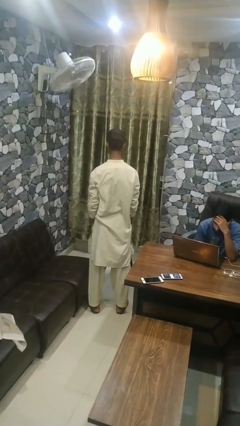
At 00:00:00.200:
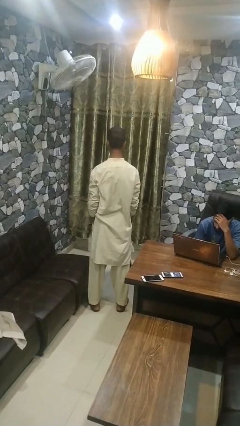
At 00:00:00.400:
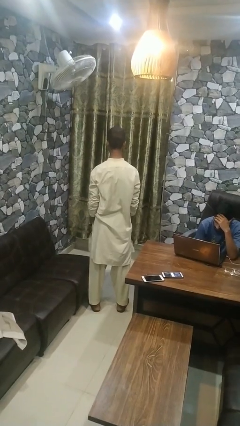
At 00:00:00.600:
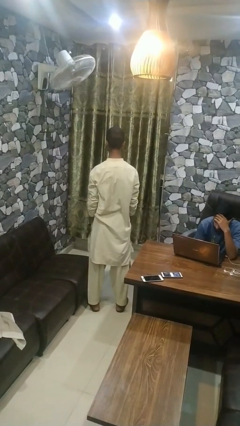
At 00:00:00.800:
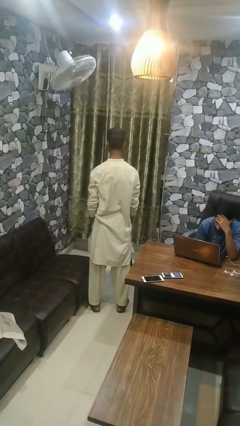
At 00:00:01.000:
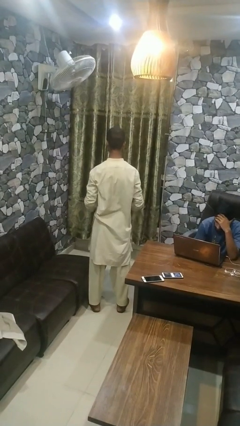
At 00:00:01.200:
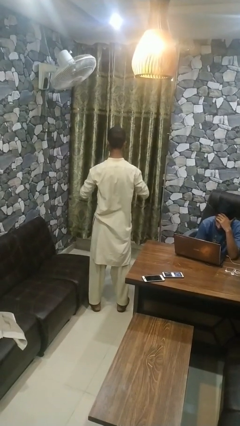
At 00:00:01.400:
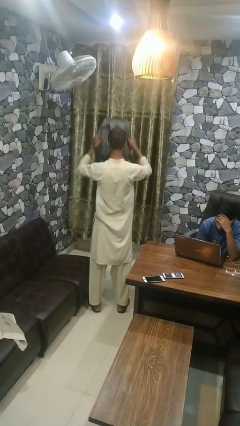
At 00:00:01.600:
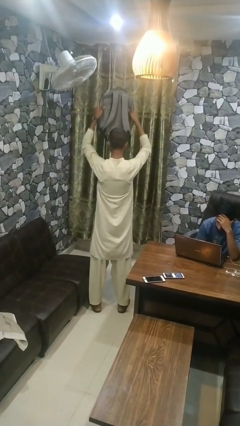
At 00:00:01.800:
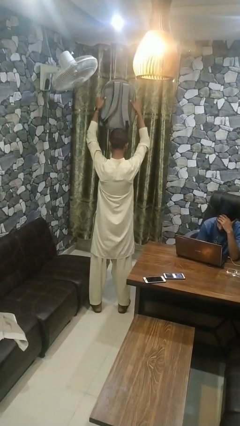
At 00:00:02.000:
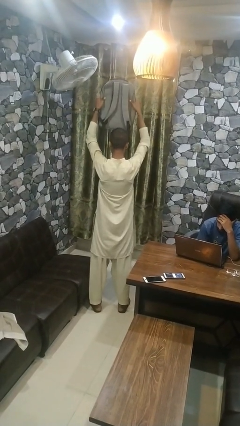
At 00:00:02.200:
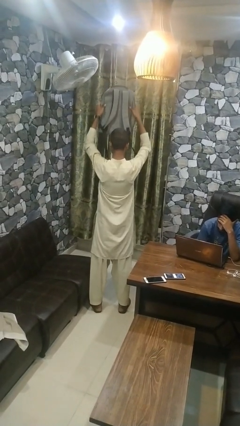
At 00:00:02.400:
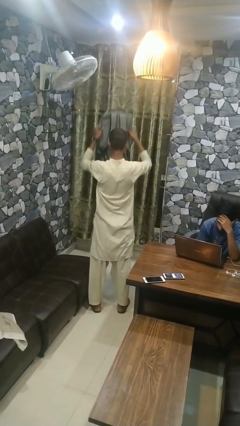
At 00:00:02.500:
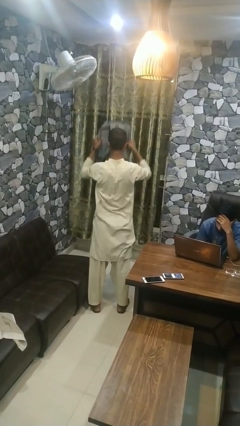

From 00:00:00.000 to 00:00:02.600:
person holds object above head

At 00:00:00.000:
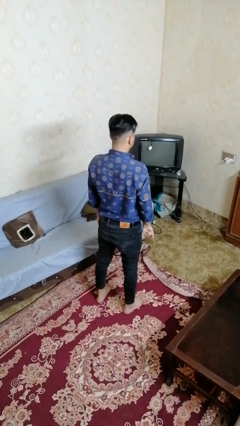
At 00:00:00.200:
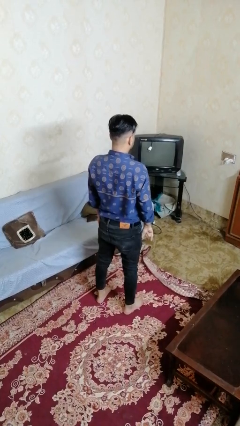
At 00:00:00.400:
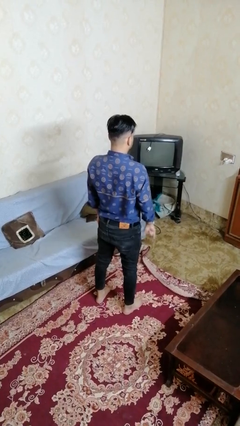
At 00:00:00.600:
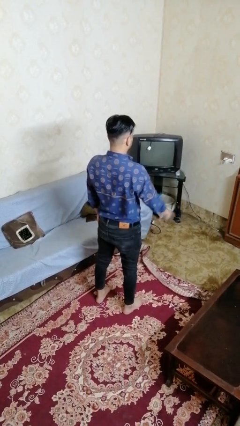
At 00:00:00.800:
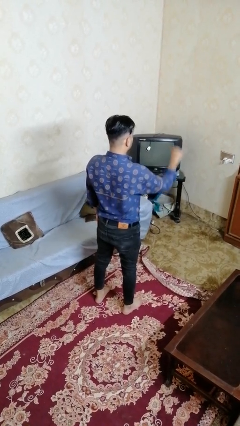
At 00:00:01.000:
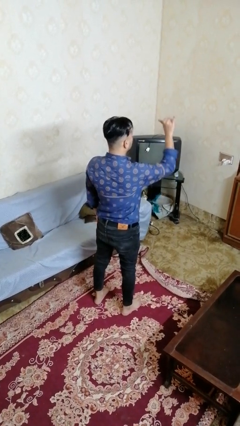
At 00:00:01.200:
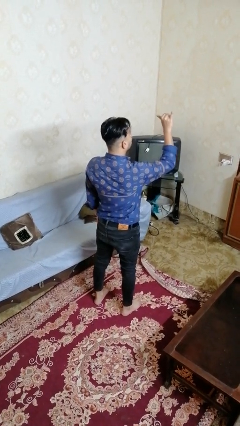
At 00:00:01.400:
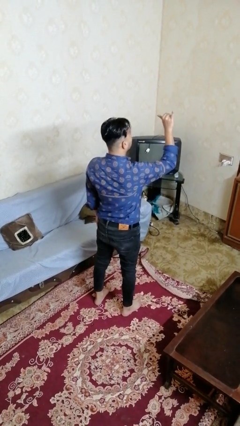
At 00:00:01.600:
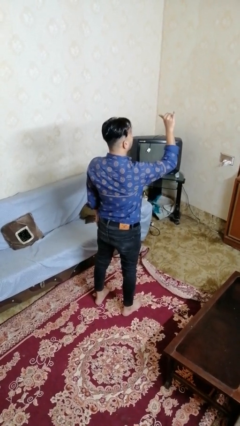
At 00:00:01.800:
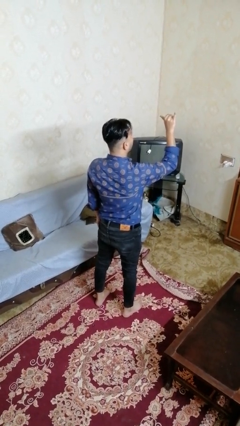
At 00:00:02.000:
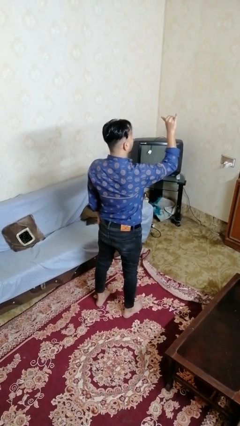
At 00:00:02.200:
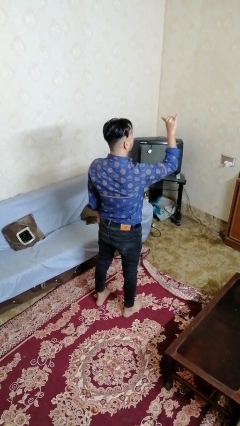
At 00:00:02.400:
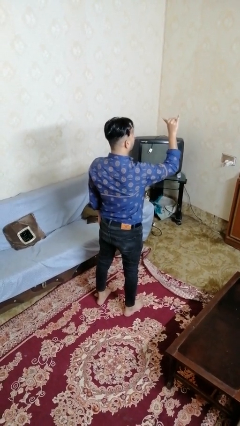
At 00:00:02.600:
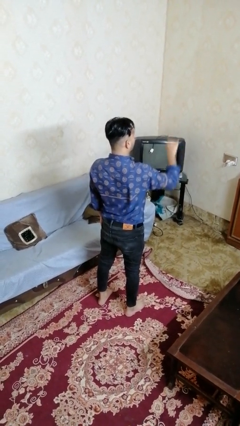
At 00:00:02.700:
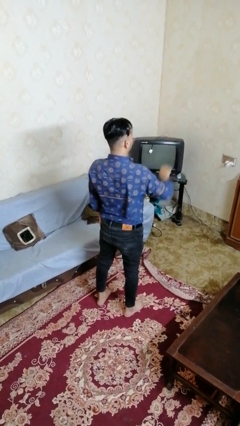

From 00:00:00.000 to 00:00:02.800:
person gestures hang loose

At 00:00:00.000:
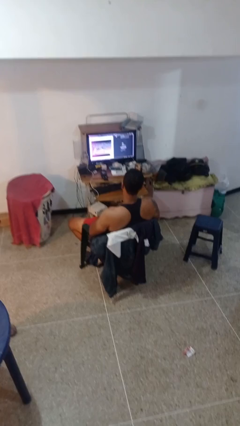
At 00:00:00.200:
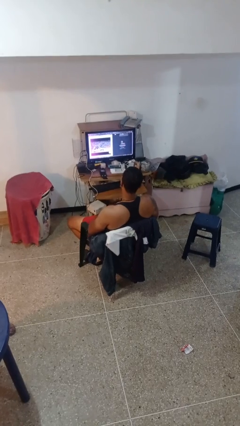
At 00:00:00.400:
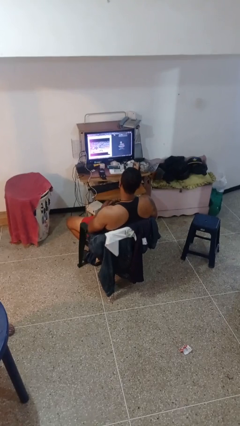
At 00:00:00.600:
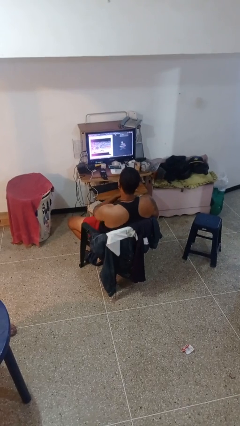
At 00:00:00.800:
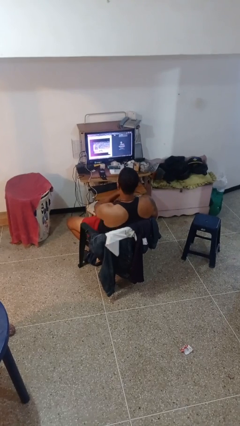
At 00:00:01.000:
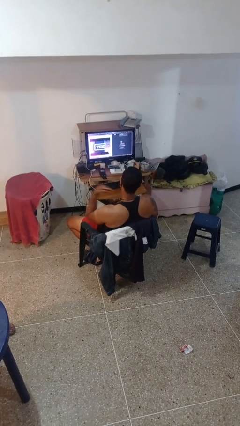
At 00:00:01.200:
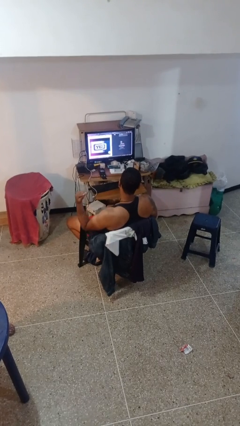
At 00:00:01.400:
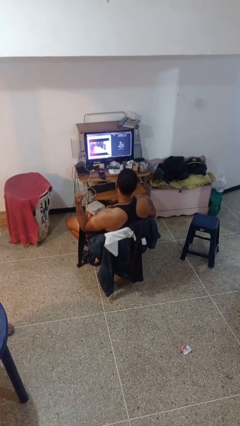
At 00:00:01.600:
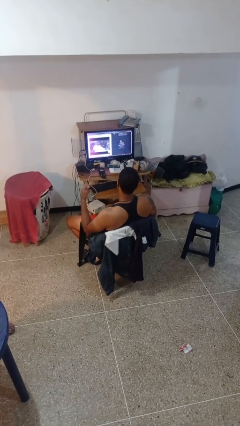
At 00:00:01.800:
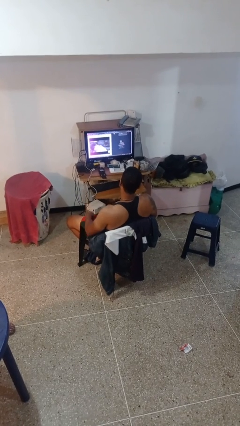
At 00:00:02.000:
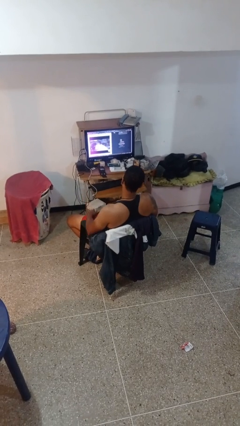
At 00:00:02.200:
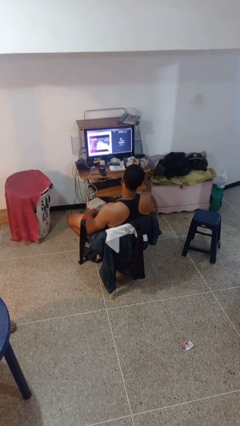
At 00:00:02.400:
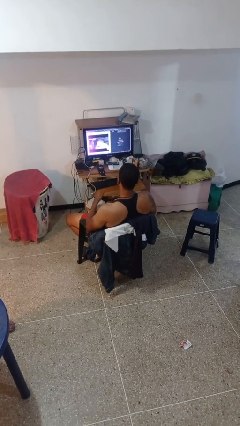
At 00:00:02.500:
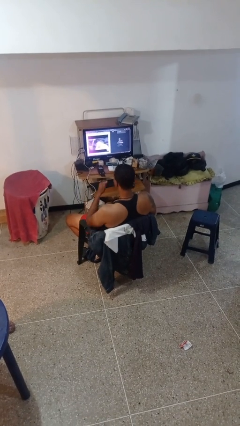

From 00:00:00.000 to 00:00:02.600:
person gestures cut

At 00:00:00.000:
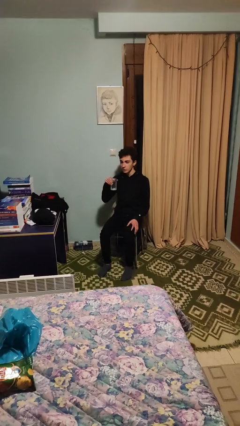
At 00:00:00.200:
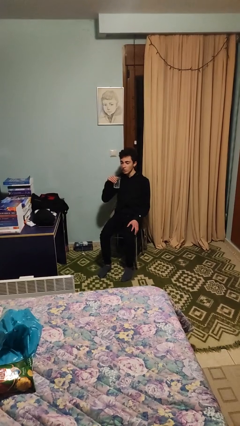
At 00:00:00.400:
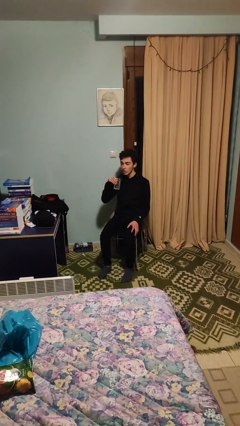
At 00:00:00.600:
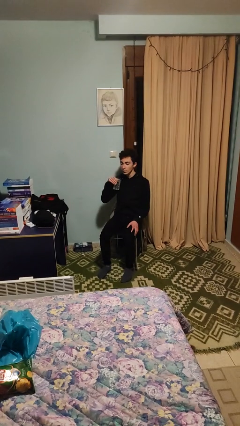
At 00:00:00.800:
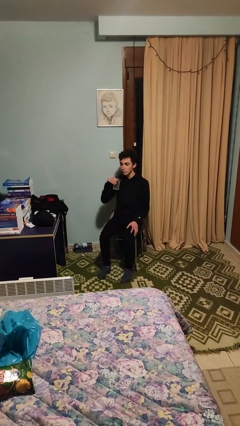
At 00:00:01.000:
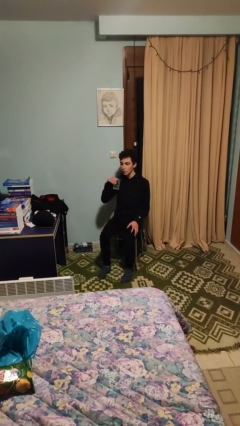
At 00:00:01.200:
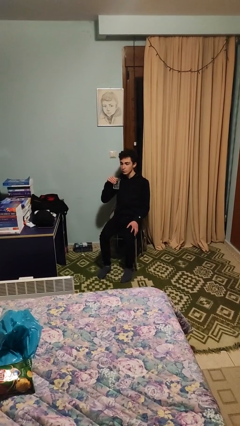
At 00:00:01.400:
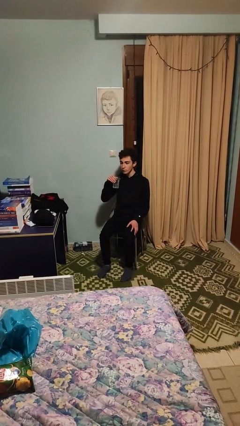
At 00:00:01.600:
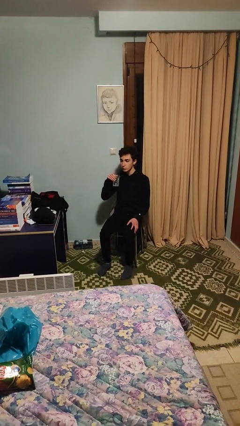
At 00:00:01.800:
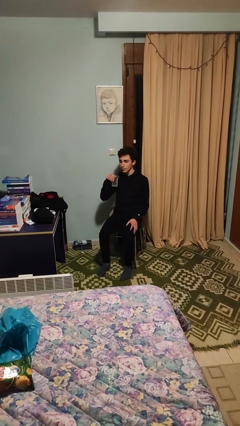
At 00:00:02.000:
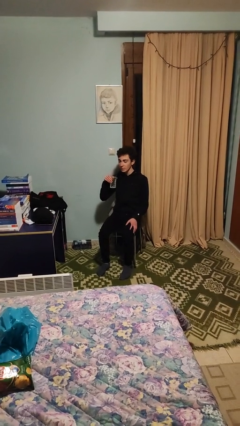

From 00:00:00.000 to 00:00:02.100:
person drinks from straw

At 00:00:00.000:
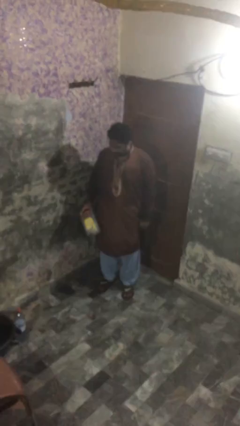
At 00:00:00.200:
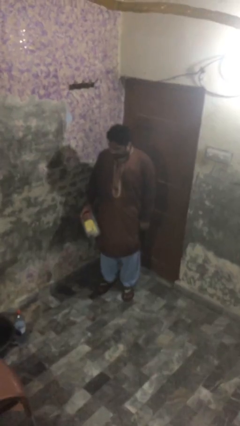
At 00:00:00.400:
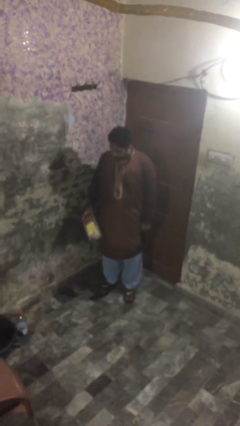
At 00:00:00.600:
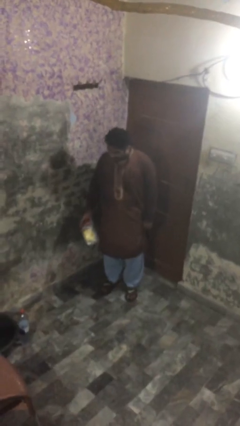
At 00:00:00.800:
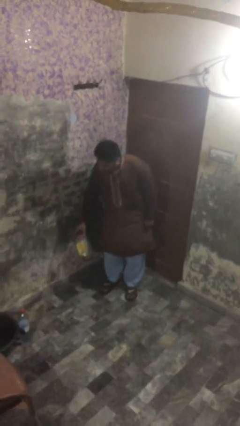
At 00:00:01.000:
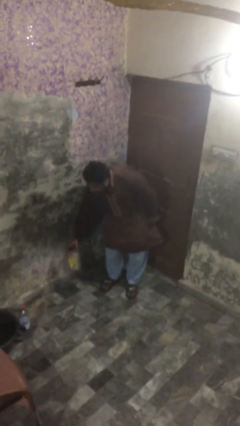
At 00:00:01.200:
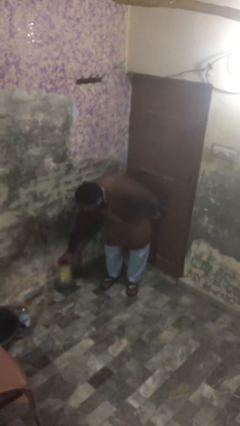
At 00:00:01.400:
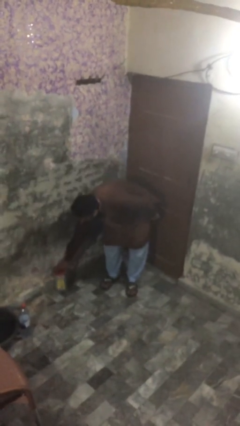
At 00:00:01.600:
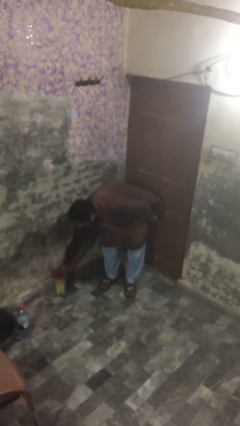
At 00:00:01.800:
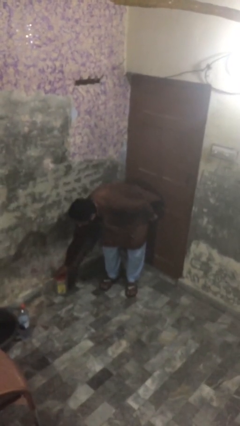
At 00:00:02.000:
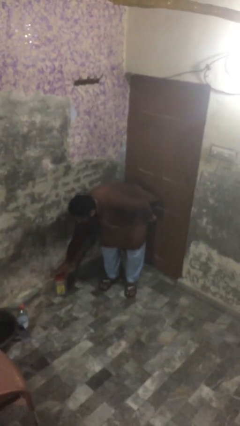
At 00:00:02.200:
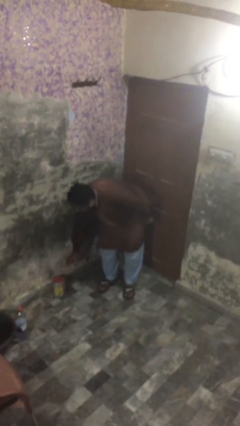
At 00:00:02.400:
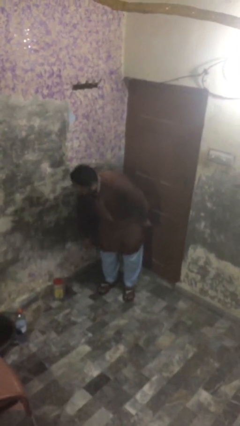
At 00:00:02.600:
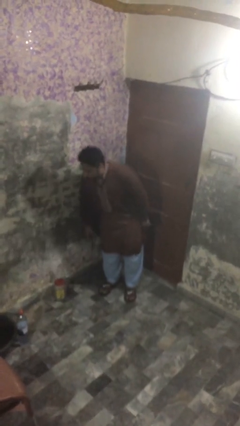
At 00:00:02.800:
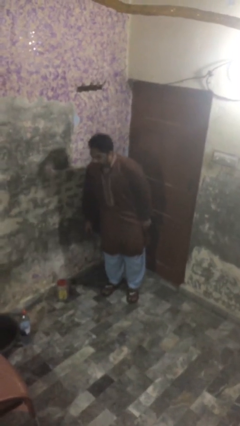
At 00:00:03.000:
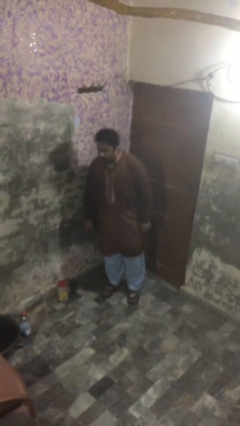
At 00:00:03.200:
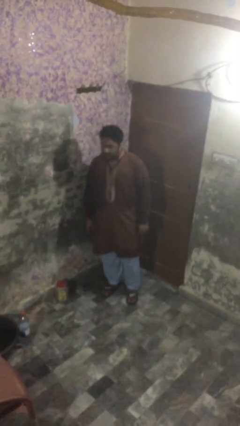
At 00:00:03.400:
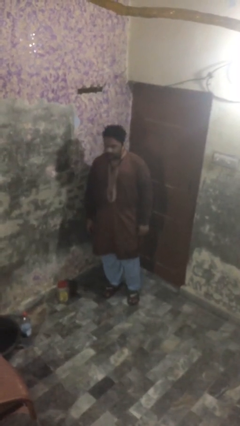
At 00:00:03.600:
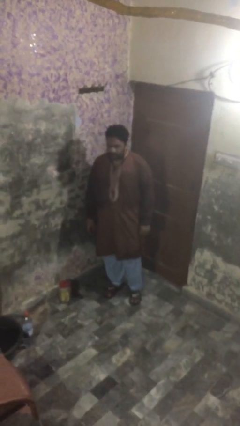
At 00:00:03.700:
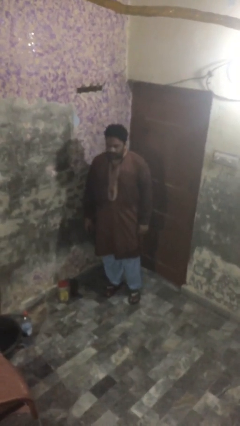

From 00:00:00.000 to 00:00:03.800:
person puts down object on floor

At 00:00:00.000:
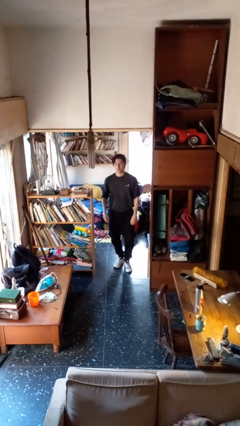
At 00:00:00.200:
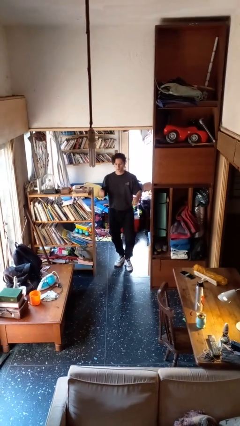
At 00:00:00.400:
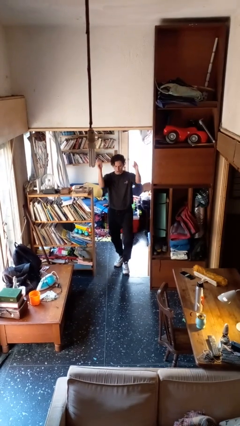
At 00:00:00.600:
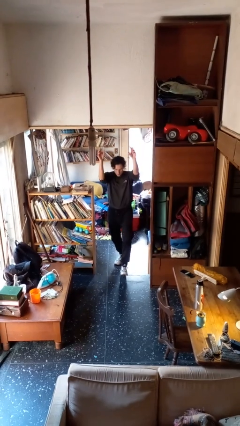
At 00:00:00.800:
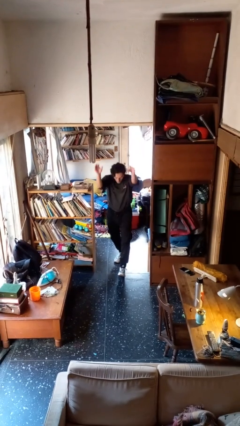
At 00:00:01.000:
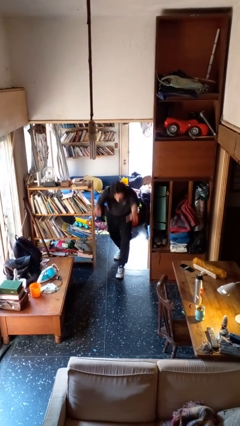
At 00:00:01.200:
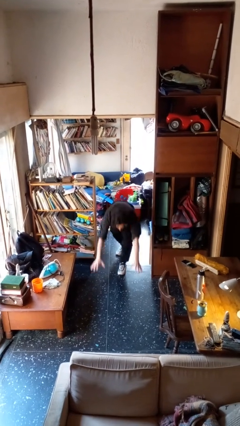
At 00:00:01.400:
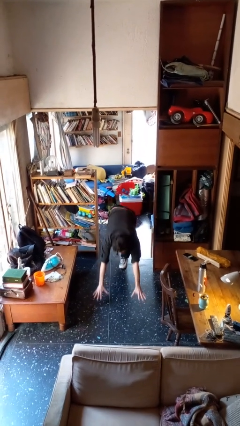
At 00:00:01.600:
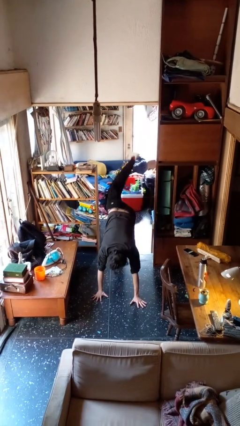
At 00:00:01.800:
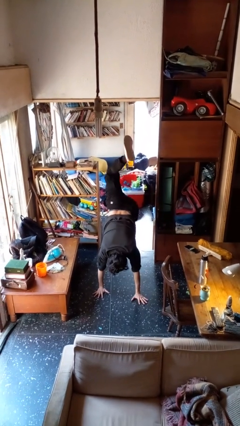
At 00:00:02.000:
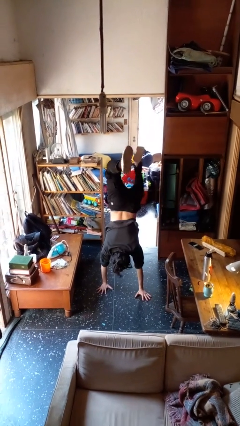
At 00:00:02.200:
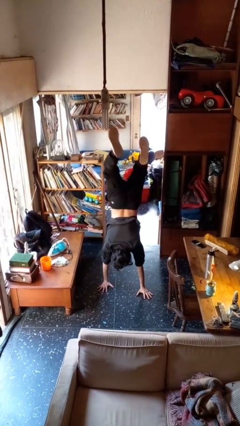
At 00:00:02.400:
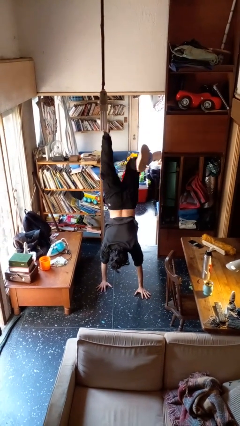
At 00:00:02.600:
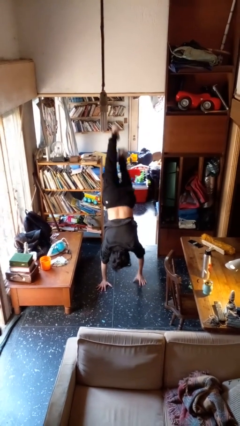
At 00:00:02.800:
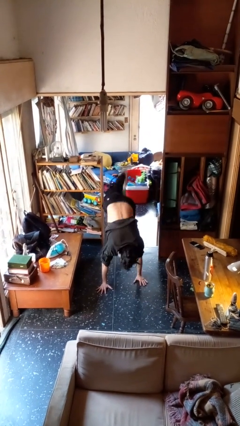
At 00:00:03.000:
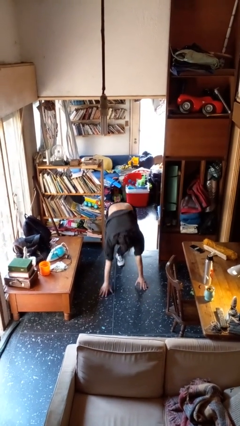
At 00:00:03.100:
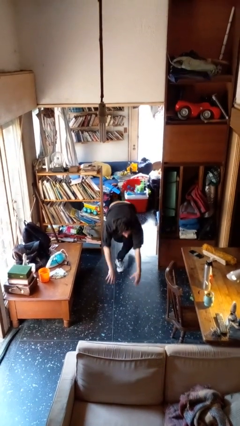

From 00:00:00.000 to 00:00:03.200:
person handstand
